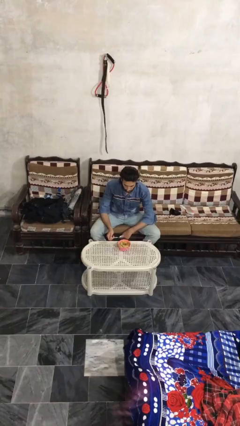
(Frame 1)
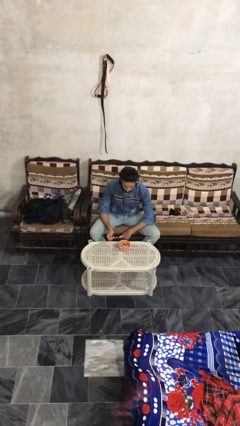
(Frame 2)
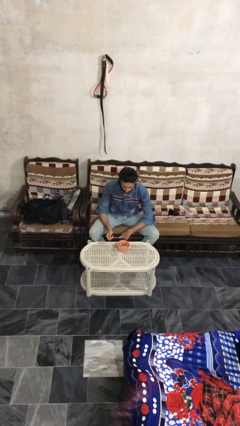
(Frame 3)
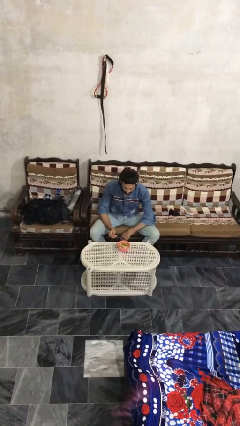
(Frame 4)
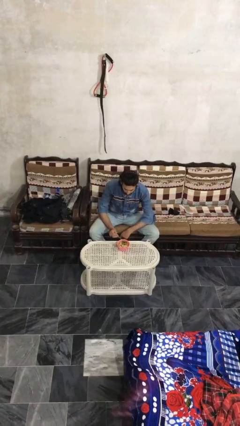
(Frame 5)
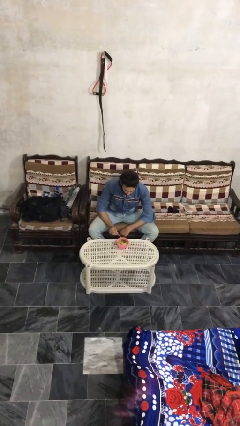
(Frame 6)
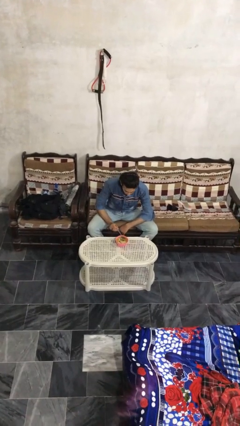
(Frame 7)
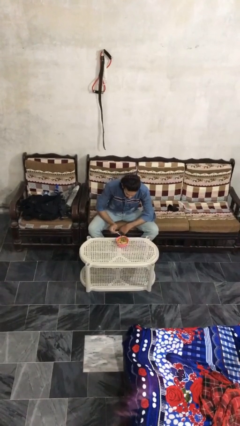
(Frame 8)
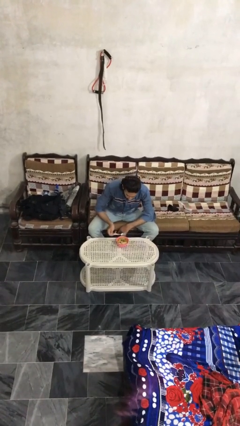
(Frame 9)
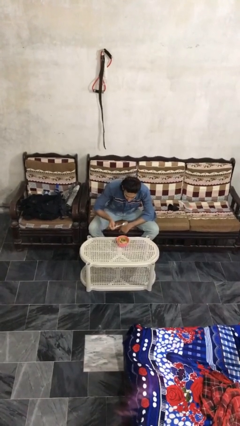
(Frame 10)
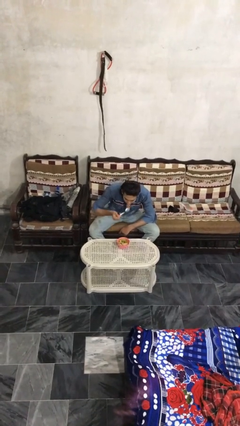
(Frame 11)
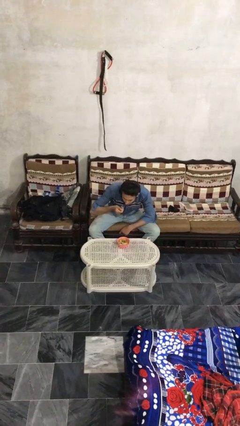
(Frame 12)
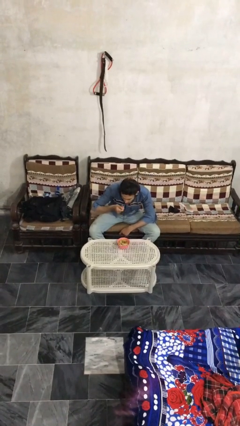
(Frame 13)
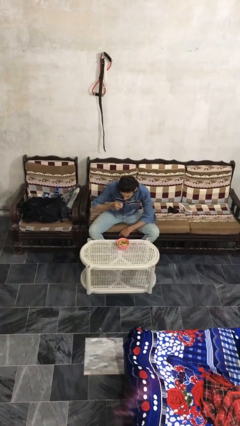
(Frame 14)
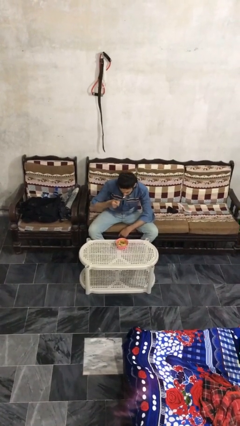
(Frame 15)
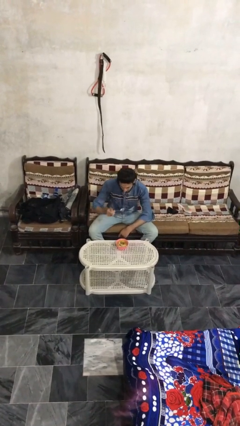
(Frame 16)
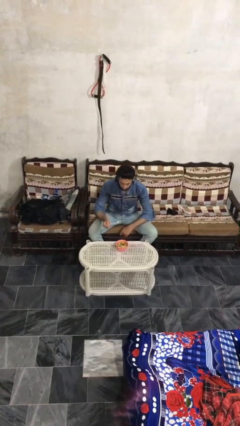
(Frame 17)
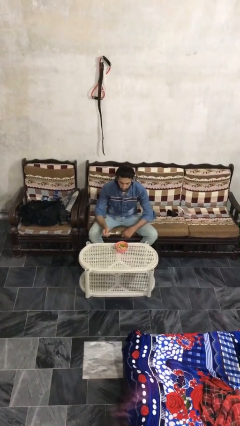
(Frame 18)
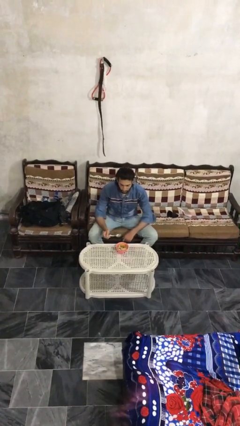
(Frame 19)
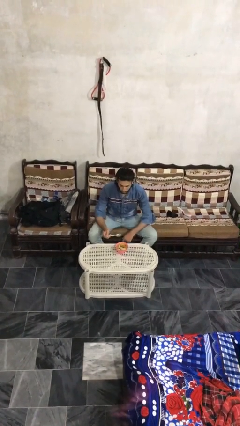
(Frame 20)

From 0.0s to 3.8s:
person eats with utensil

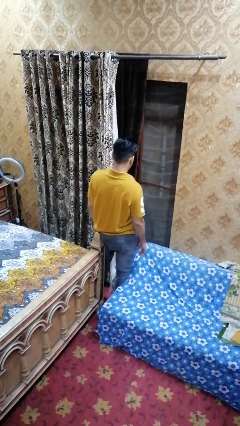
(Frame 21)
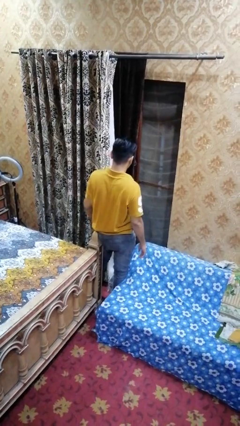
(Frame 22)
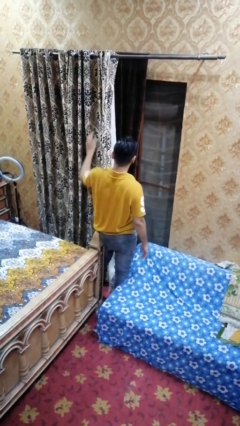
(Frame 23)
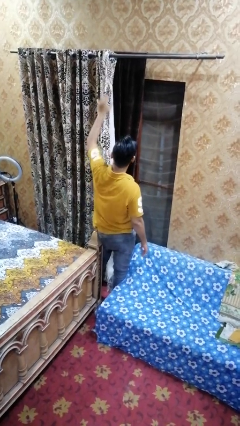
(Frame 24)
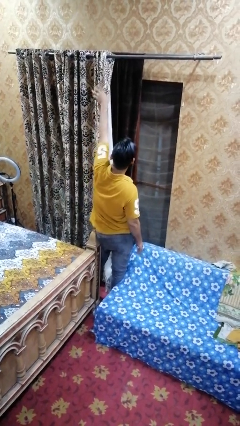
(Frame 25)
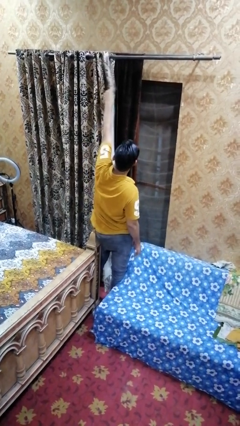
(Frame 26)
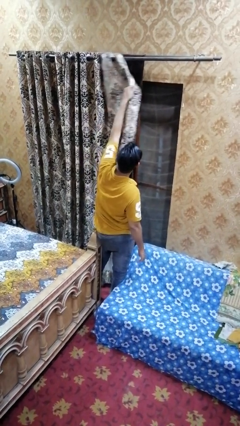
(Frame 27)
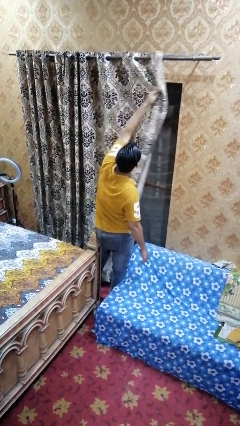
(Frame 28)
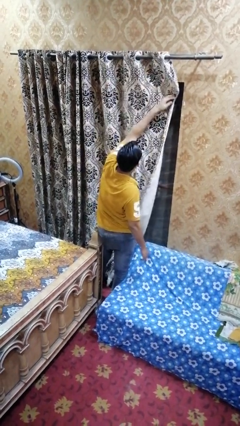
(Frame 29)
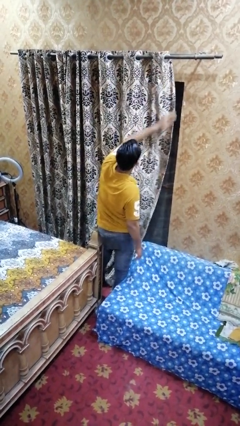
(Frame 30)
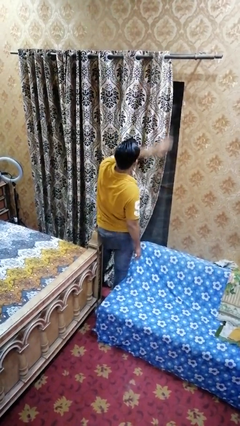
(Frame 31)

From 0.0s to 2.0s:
person closes curtains

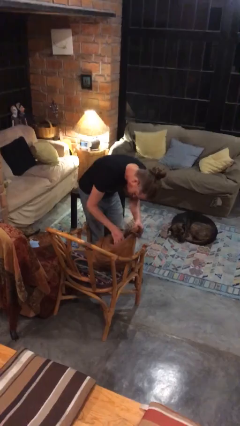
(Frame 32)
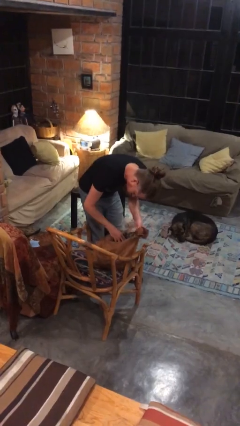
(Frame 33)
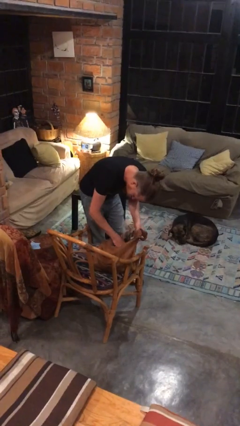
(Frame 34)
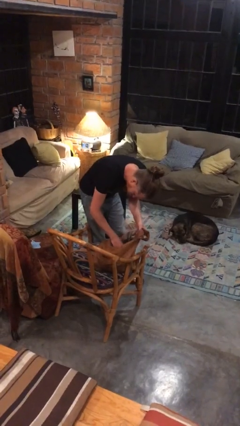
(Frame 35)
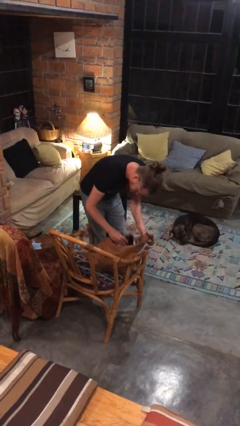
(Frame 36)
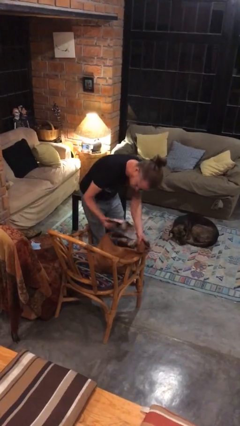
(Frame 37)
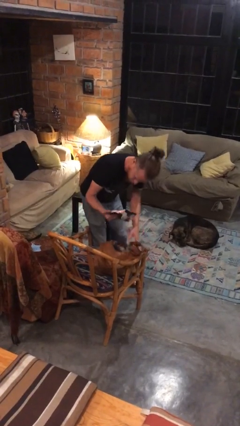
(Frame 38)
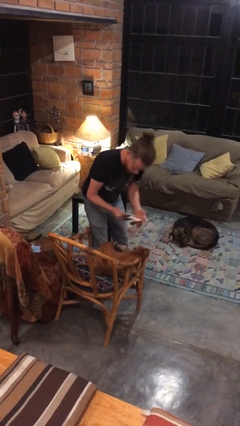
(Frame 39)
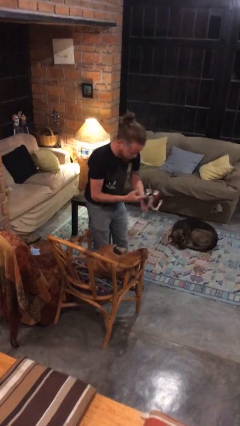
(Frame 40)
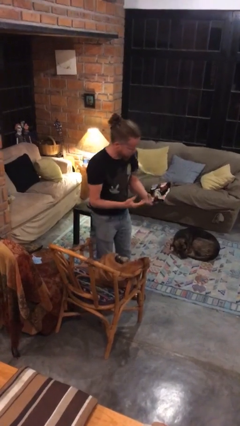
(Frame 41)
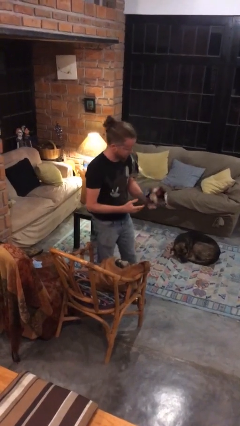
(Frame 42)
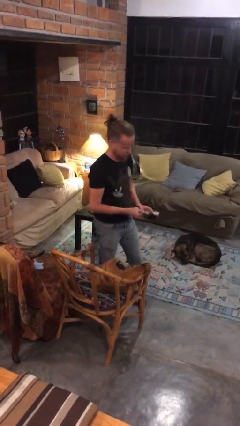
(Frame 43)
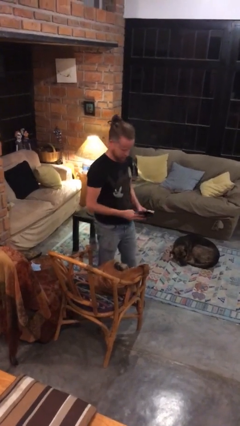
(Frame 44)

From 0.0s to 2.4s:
person takes object from purse

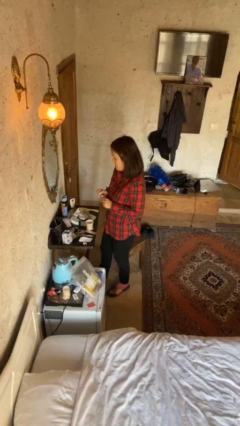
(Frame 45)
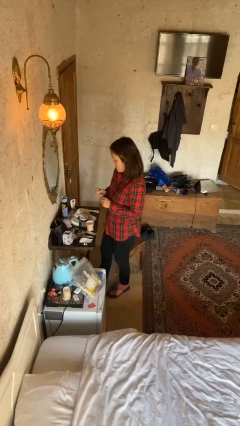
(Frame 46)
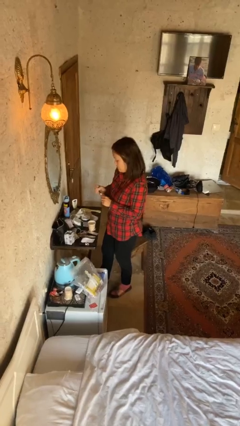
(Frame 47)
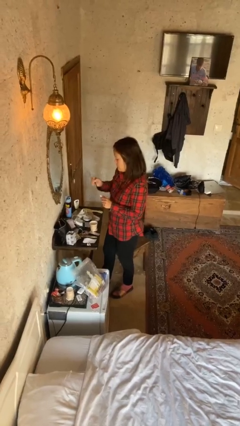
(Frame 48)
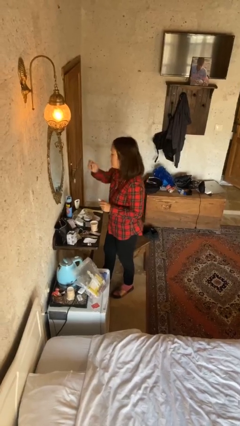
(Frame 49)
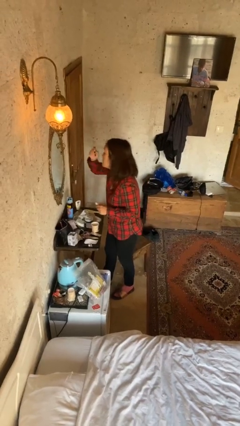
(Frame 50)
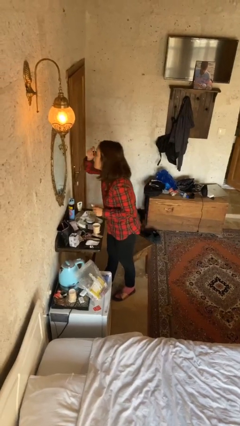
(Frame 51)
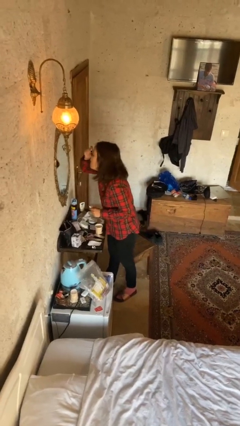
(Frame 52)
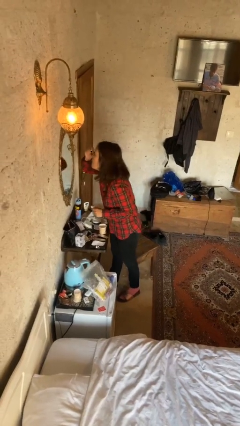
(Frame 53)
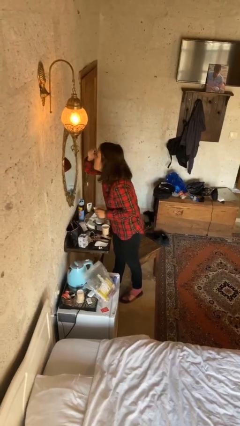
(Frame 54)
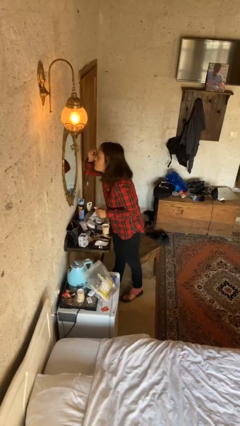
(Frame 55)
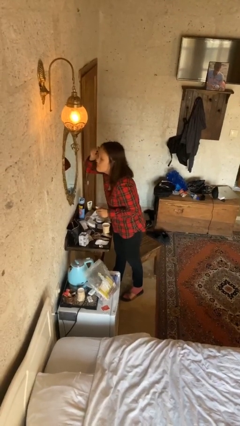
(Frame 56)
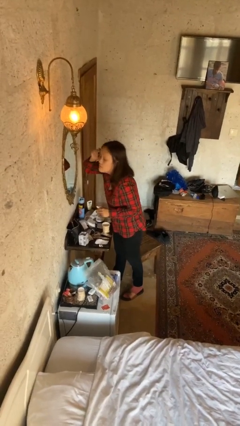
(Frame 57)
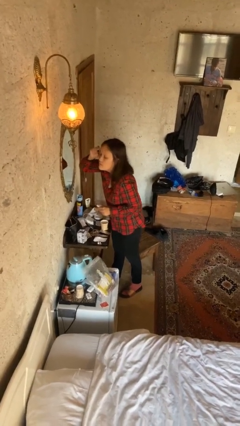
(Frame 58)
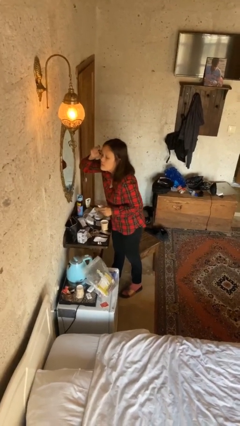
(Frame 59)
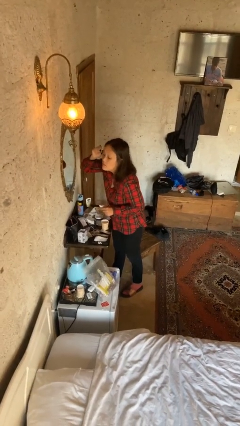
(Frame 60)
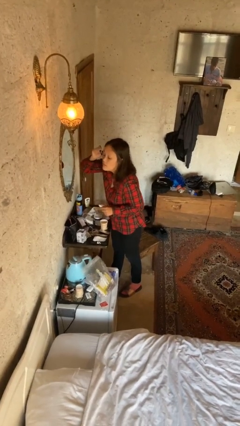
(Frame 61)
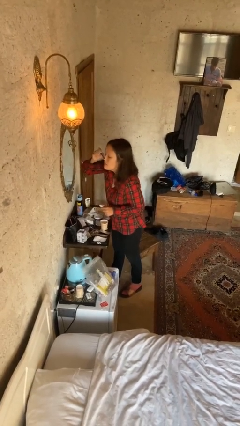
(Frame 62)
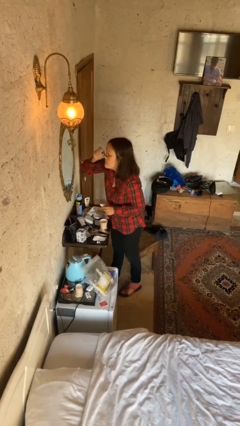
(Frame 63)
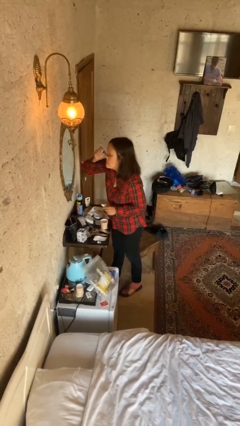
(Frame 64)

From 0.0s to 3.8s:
person applies eye makeup

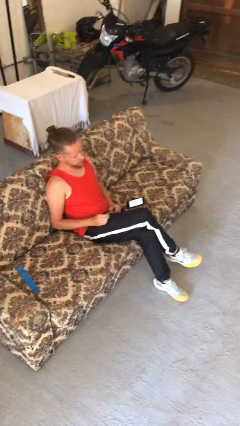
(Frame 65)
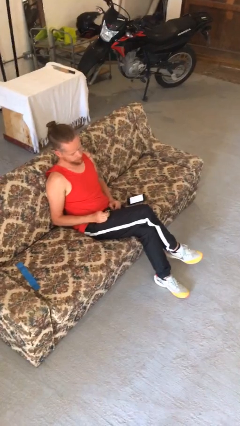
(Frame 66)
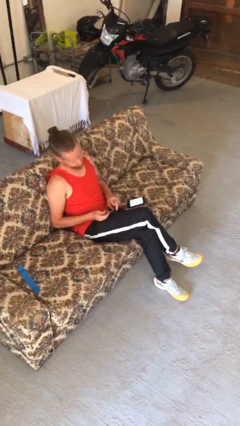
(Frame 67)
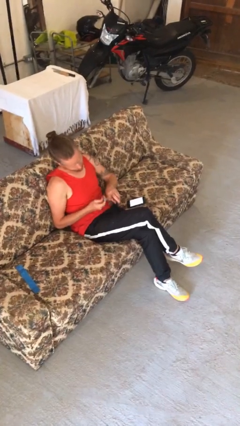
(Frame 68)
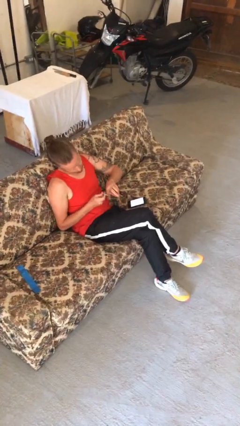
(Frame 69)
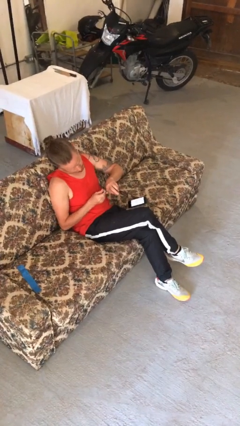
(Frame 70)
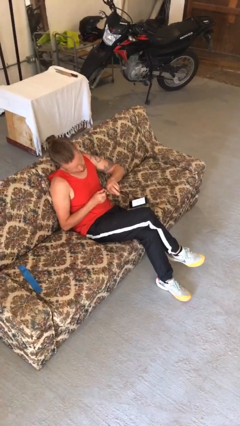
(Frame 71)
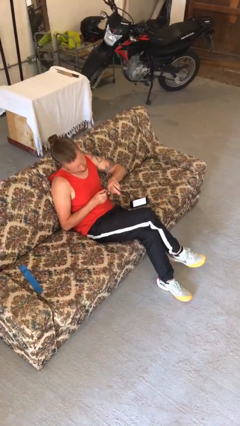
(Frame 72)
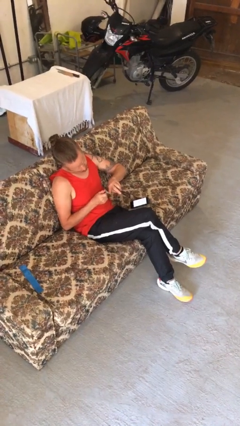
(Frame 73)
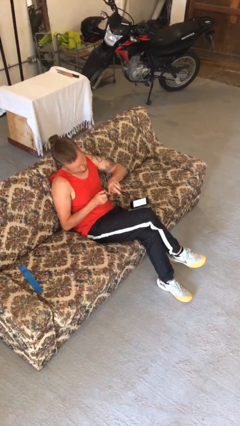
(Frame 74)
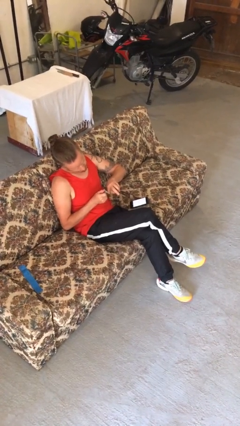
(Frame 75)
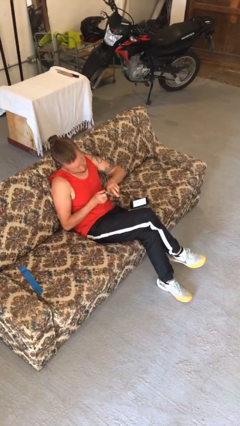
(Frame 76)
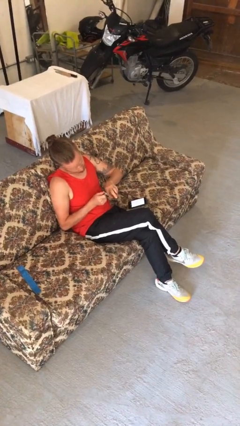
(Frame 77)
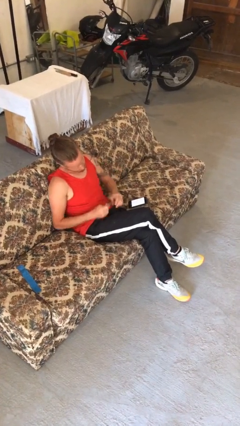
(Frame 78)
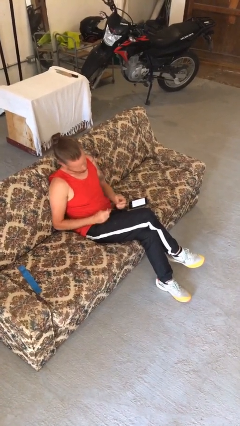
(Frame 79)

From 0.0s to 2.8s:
person files fingernails

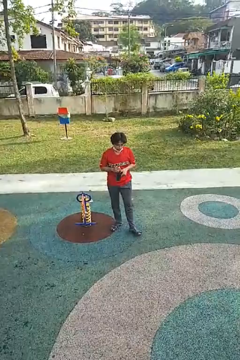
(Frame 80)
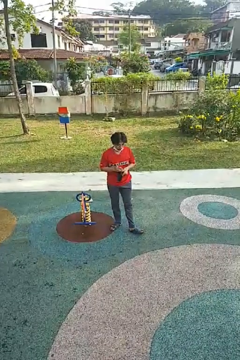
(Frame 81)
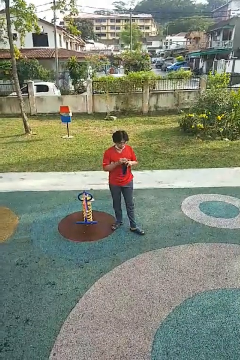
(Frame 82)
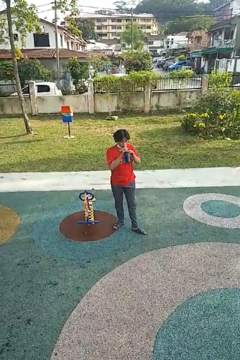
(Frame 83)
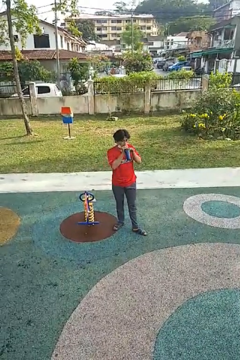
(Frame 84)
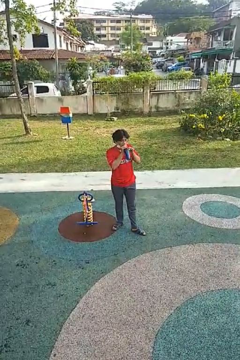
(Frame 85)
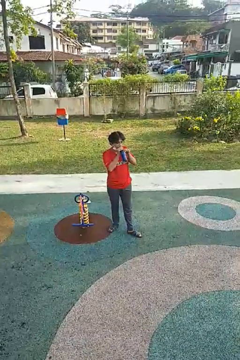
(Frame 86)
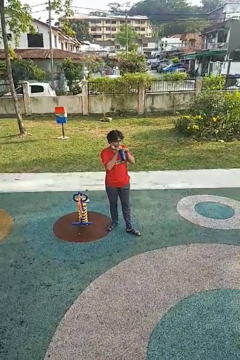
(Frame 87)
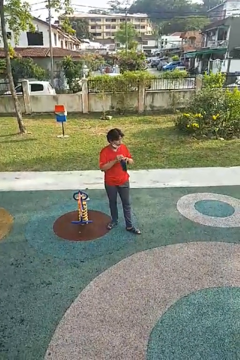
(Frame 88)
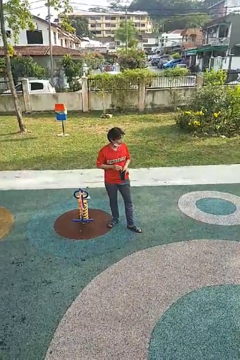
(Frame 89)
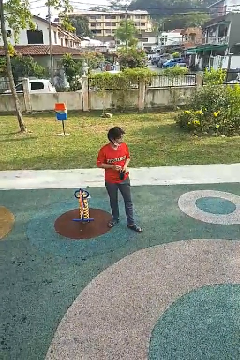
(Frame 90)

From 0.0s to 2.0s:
person drinks from straw

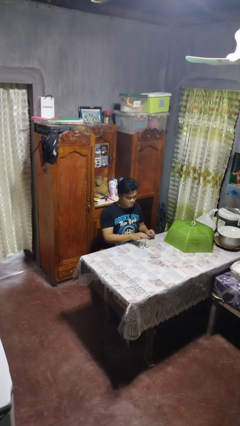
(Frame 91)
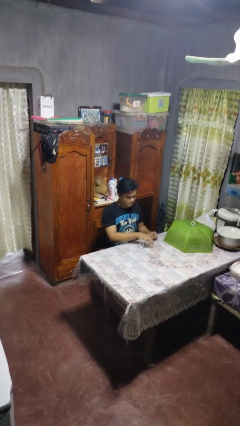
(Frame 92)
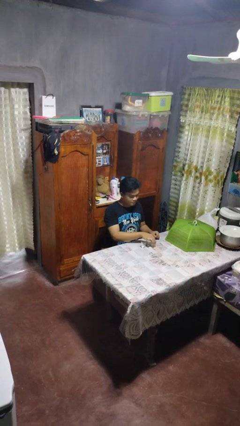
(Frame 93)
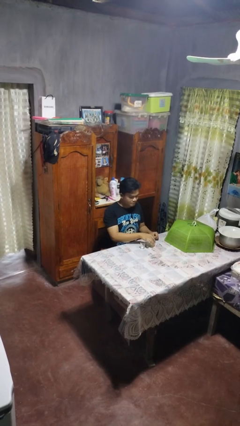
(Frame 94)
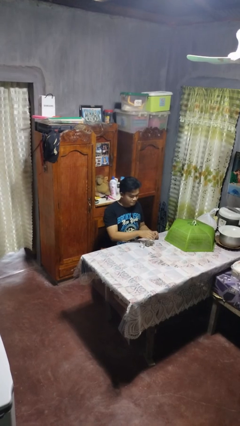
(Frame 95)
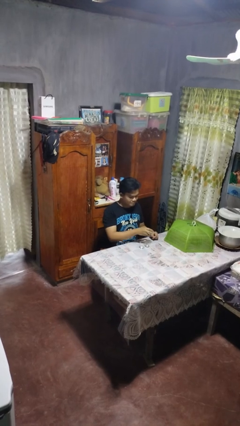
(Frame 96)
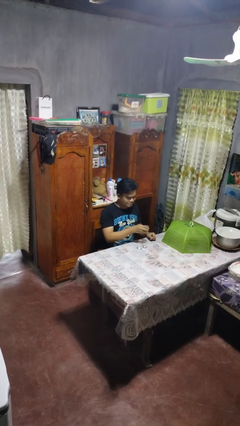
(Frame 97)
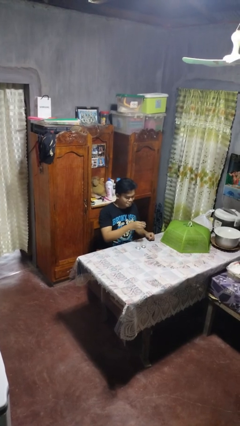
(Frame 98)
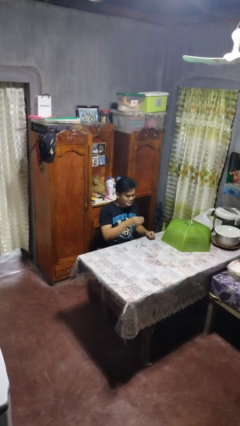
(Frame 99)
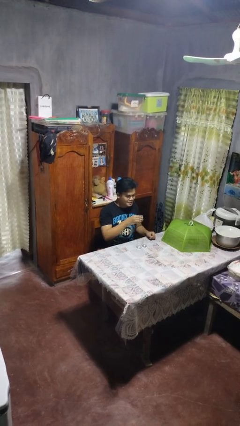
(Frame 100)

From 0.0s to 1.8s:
person picks up object from table
